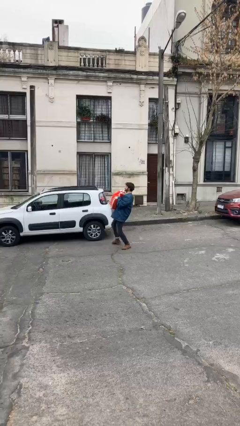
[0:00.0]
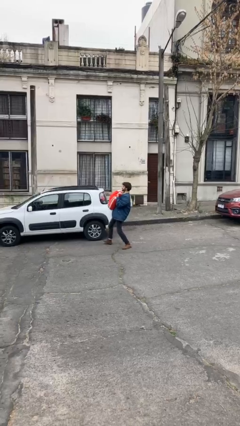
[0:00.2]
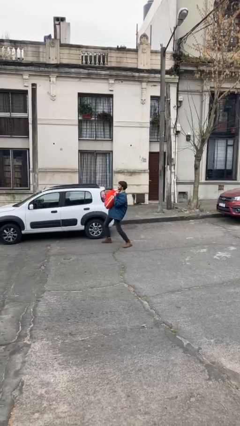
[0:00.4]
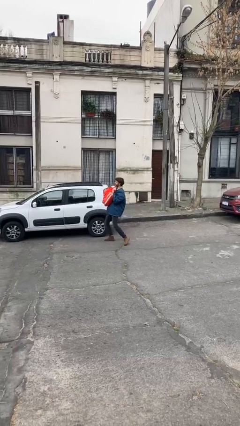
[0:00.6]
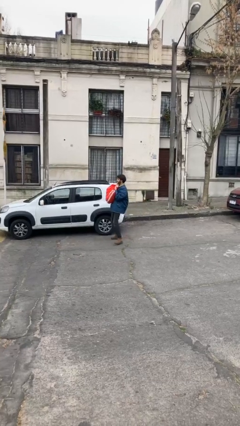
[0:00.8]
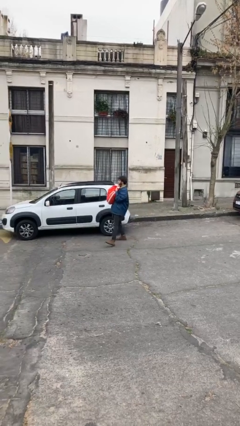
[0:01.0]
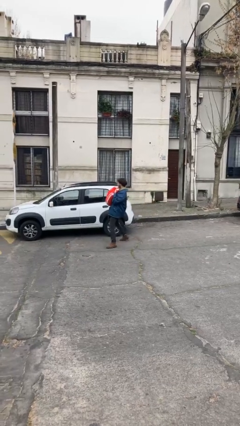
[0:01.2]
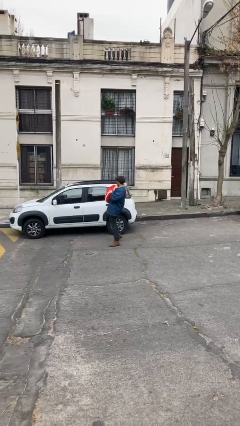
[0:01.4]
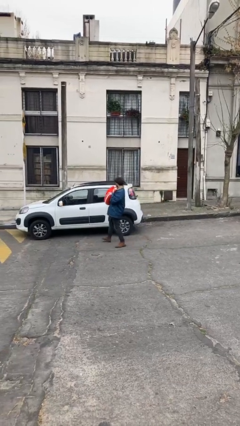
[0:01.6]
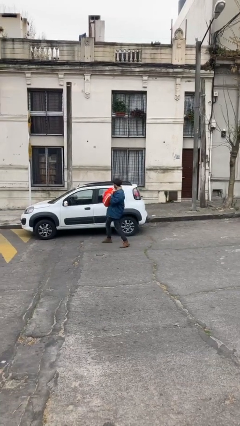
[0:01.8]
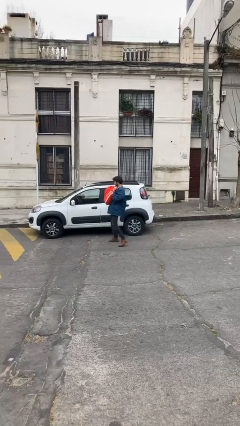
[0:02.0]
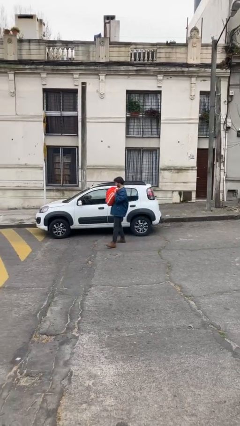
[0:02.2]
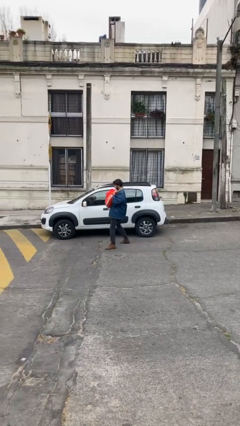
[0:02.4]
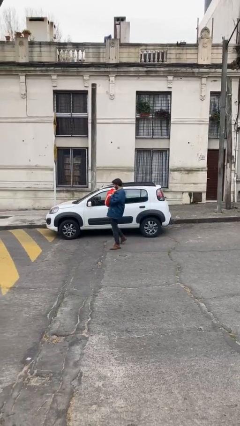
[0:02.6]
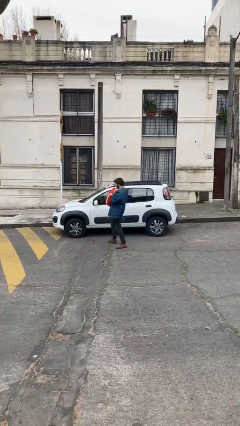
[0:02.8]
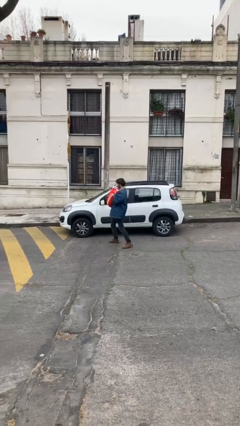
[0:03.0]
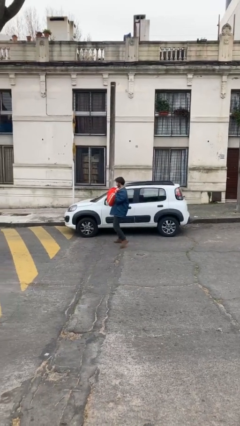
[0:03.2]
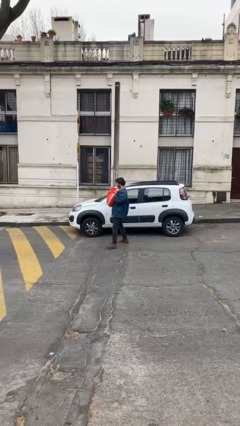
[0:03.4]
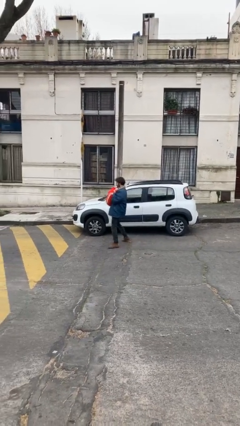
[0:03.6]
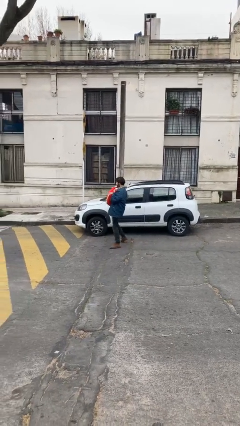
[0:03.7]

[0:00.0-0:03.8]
person carries heavy object

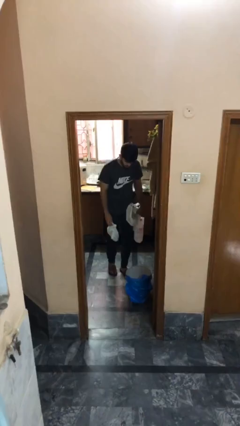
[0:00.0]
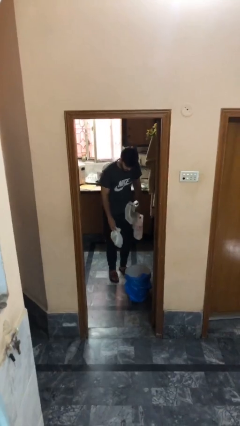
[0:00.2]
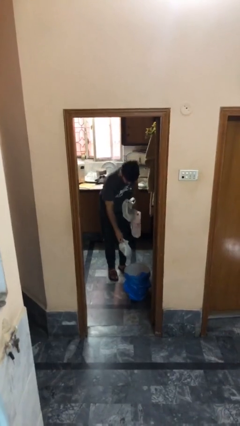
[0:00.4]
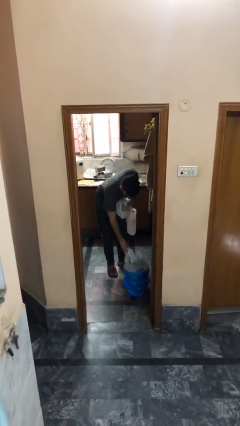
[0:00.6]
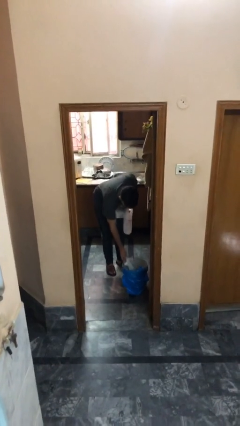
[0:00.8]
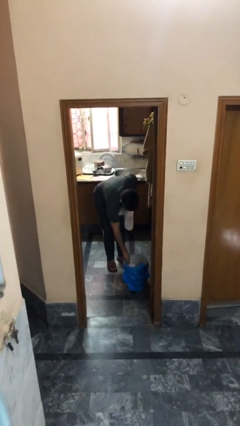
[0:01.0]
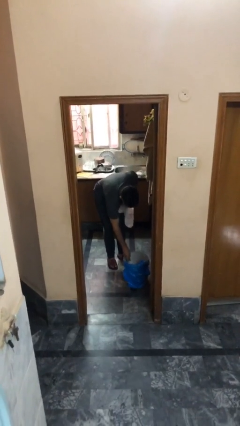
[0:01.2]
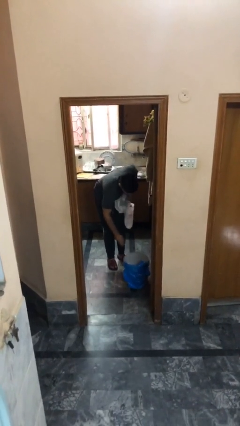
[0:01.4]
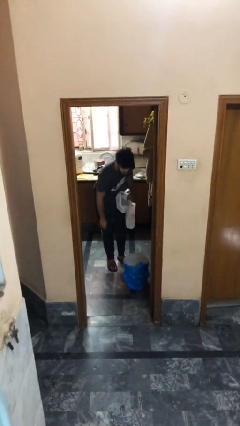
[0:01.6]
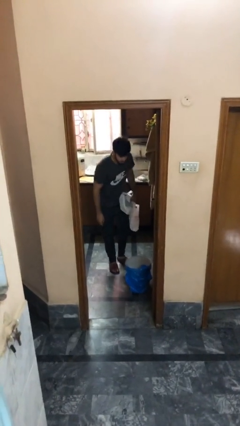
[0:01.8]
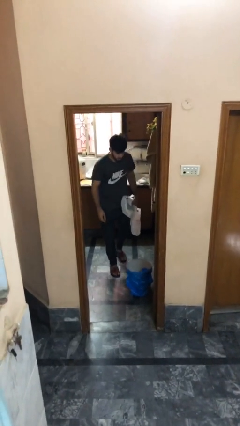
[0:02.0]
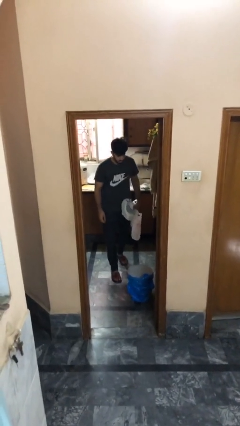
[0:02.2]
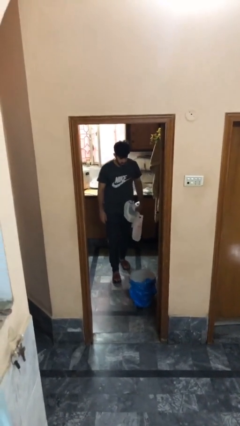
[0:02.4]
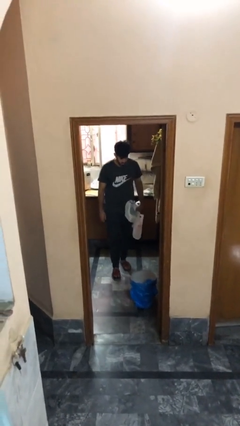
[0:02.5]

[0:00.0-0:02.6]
person discards trash

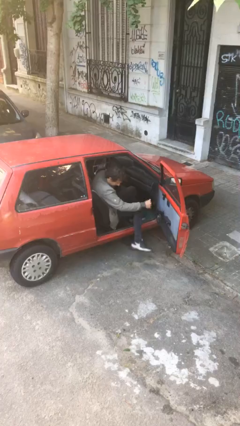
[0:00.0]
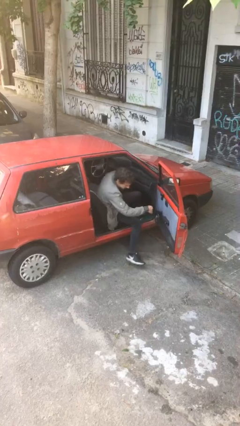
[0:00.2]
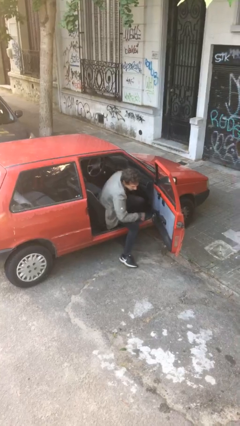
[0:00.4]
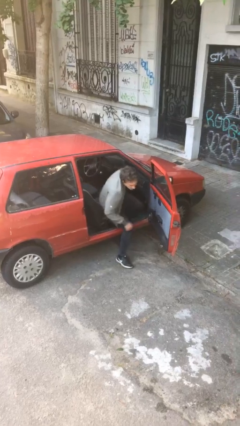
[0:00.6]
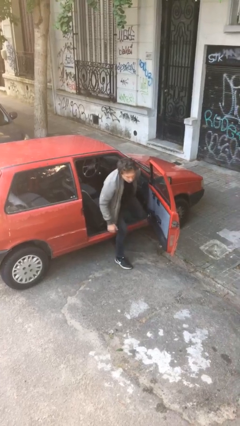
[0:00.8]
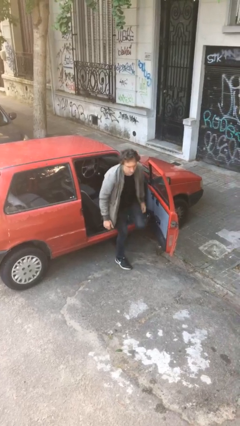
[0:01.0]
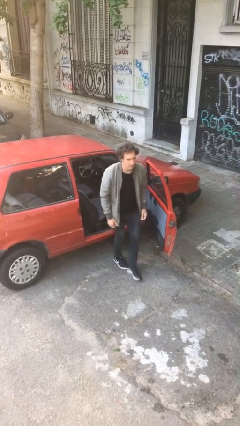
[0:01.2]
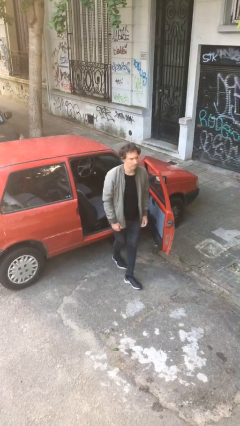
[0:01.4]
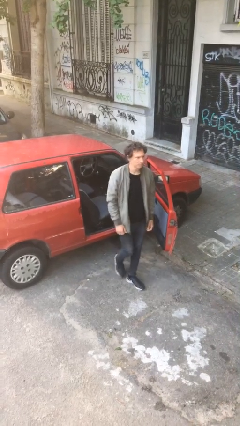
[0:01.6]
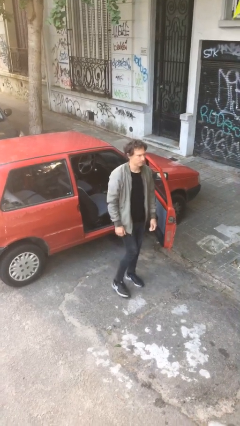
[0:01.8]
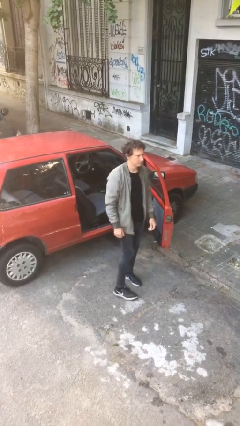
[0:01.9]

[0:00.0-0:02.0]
person exits car

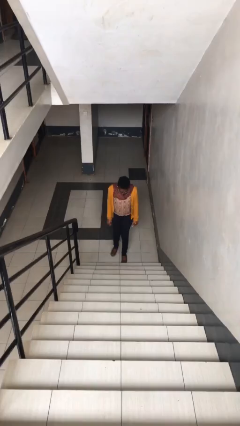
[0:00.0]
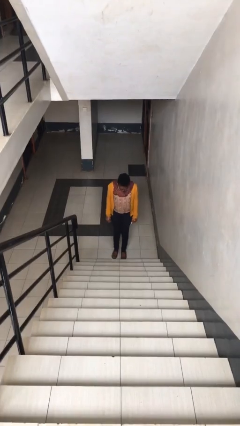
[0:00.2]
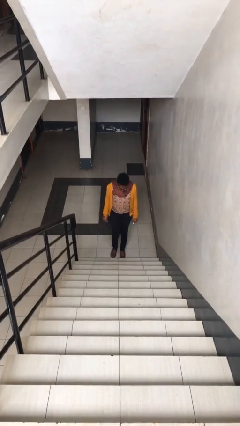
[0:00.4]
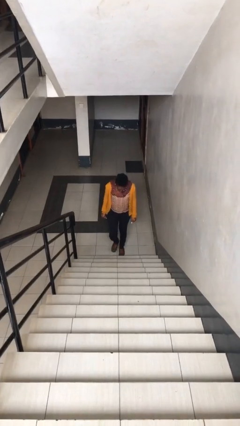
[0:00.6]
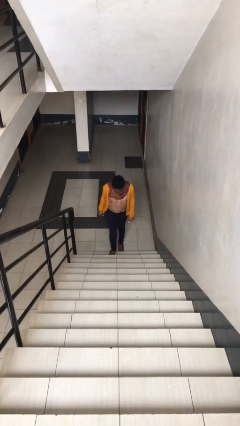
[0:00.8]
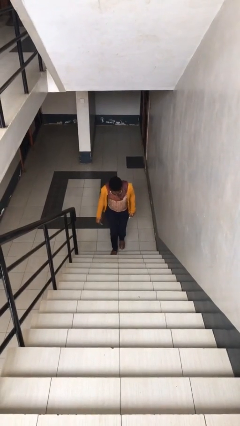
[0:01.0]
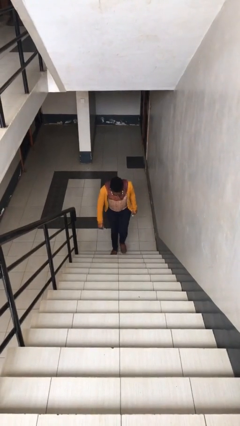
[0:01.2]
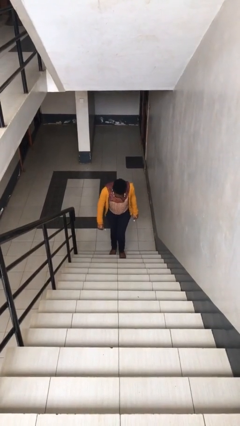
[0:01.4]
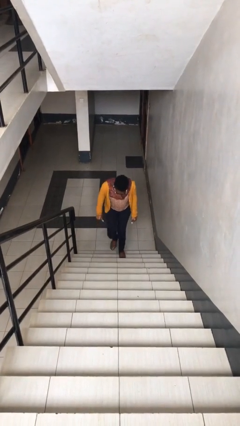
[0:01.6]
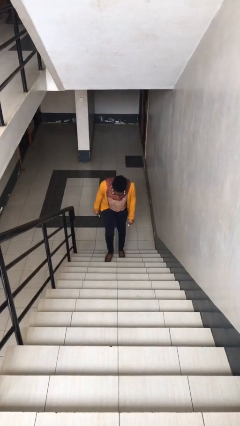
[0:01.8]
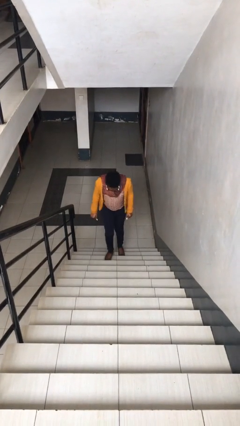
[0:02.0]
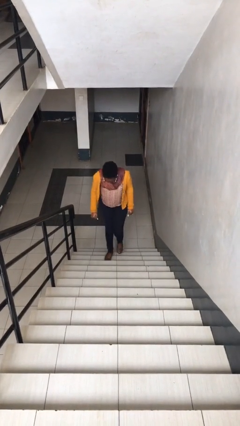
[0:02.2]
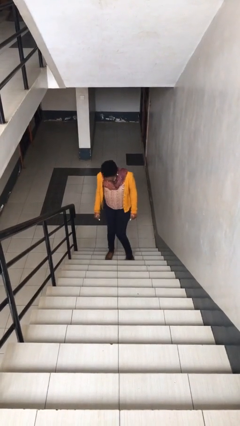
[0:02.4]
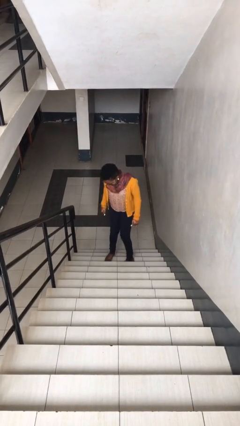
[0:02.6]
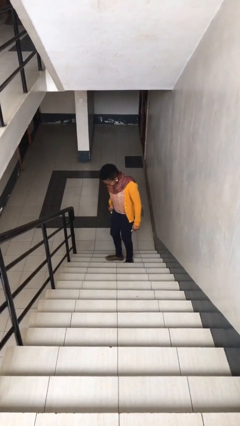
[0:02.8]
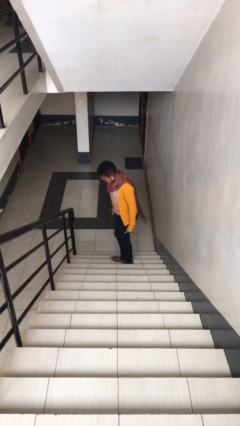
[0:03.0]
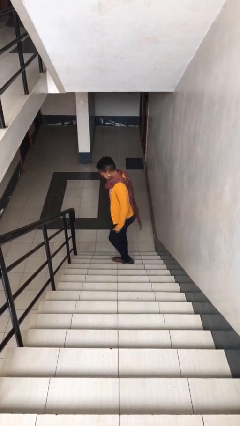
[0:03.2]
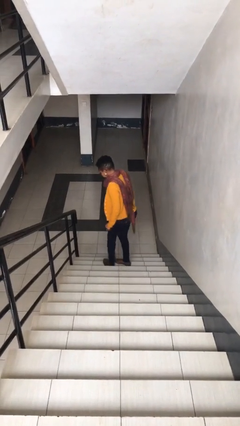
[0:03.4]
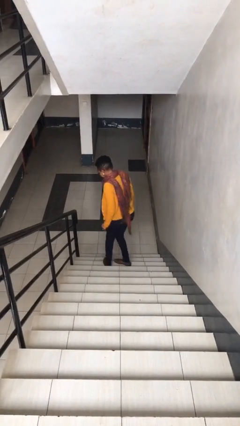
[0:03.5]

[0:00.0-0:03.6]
person climbs up stairs

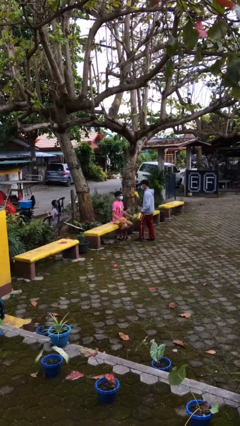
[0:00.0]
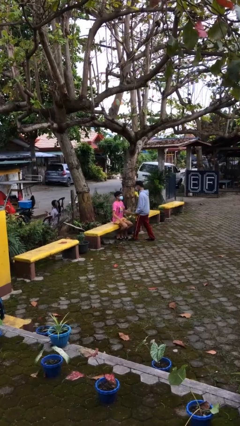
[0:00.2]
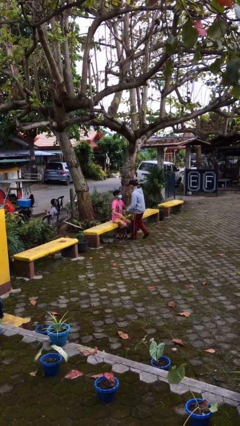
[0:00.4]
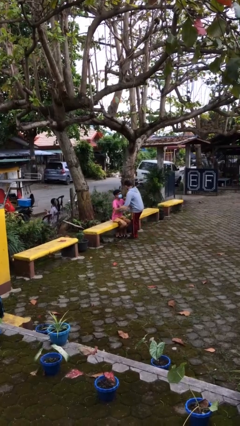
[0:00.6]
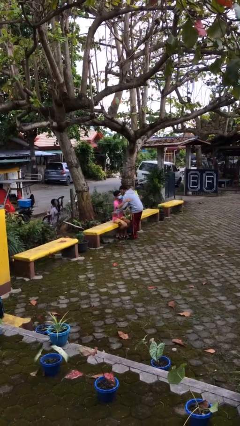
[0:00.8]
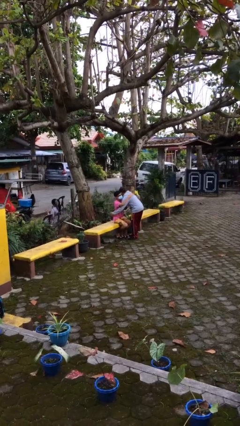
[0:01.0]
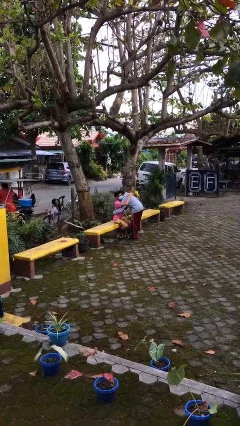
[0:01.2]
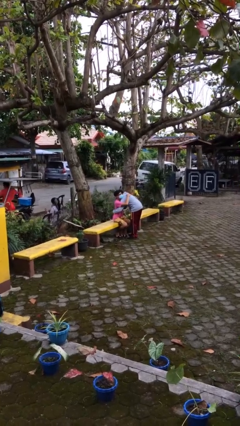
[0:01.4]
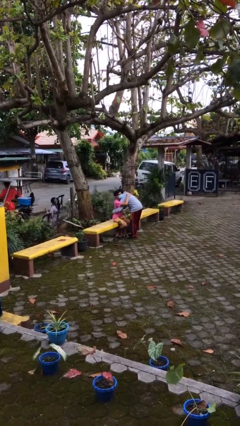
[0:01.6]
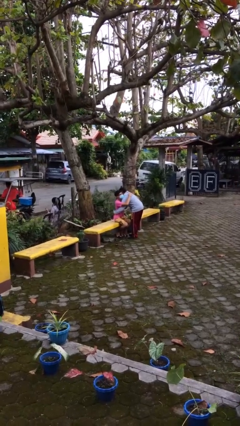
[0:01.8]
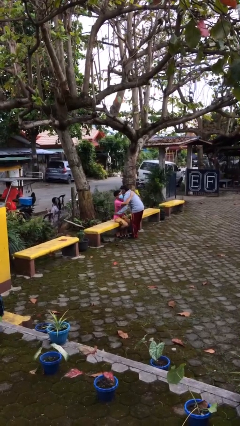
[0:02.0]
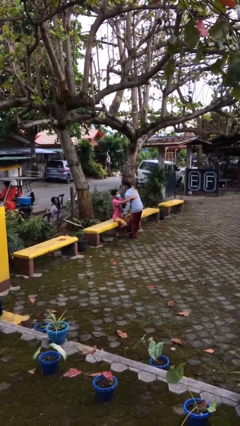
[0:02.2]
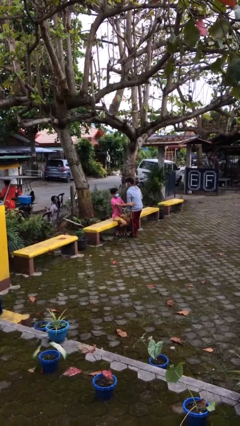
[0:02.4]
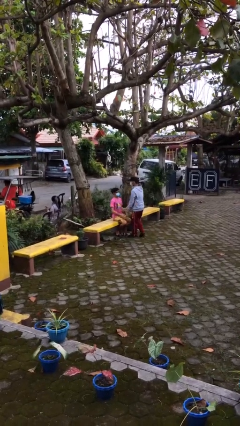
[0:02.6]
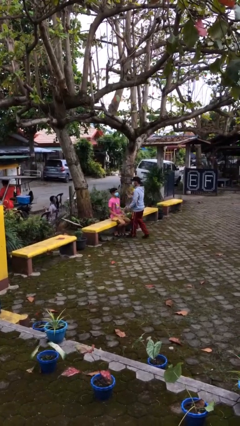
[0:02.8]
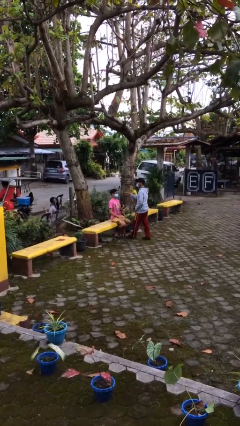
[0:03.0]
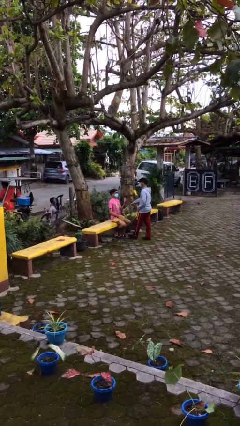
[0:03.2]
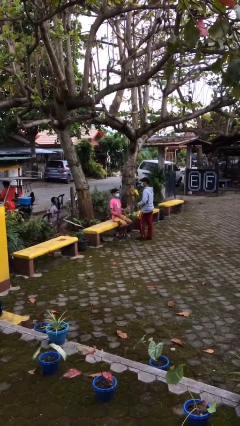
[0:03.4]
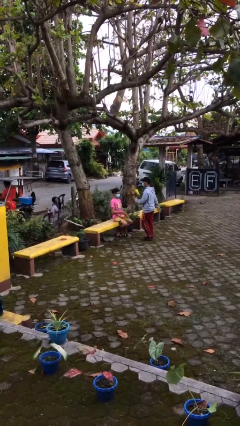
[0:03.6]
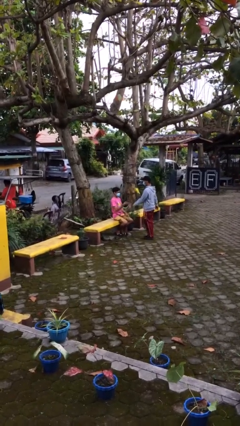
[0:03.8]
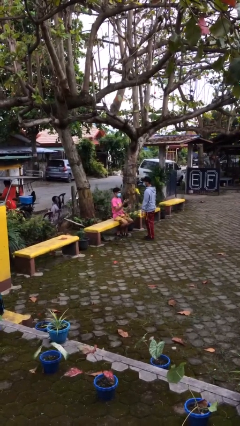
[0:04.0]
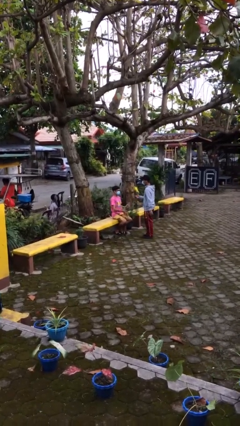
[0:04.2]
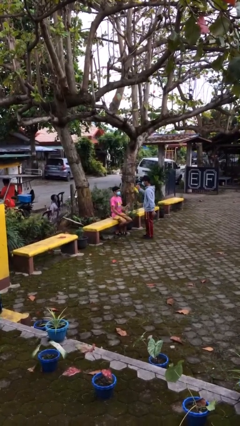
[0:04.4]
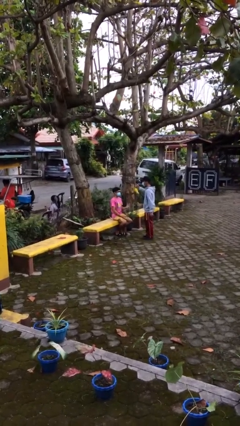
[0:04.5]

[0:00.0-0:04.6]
person embraces person

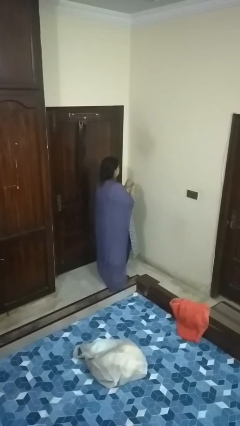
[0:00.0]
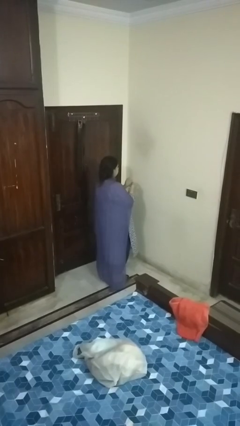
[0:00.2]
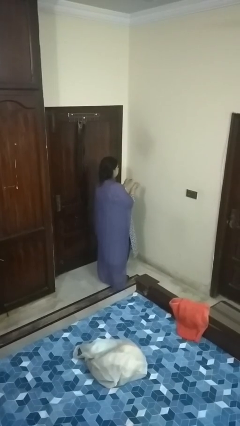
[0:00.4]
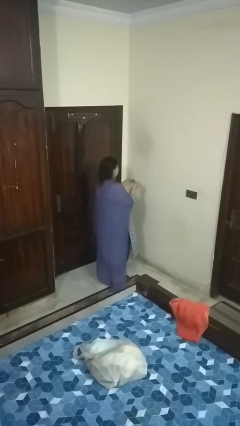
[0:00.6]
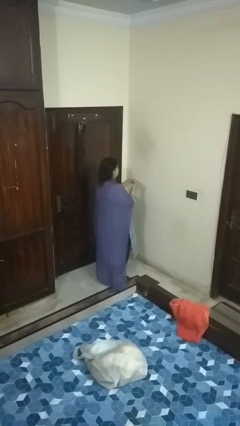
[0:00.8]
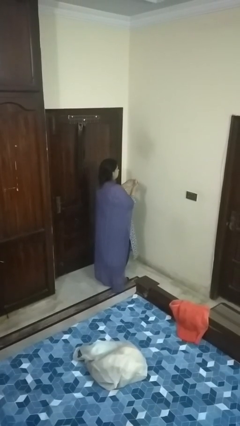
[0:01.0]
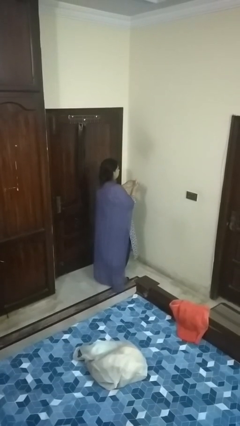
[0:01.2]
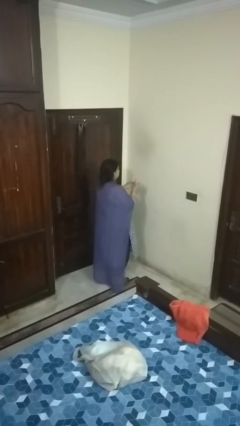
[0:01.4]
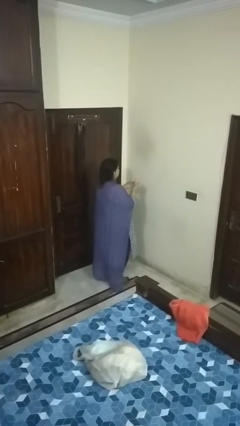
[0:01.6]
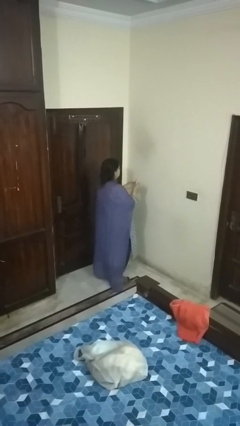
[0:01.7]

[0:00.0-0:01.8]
person puts on ring
